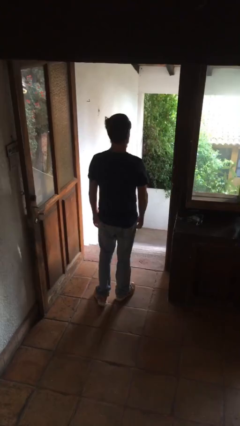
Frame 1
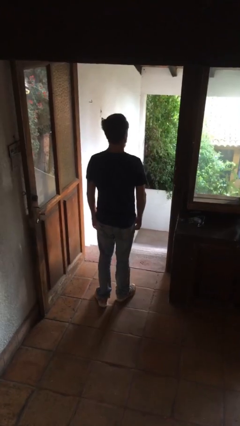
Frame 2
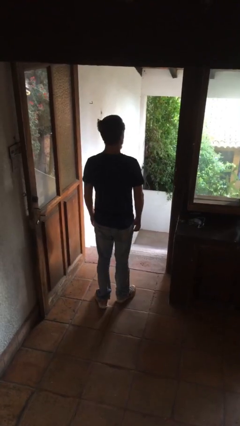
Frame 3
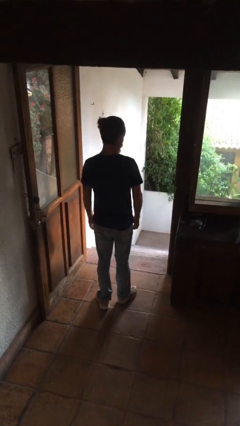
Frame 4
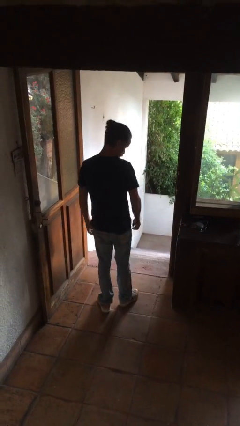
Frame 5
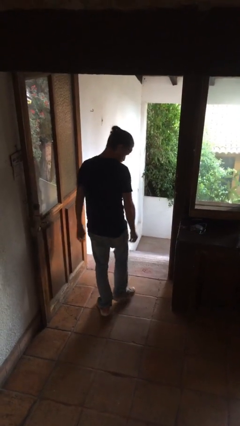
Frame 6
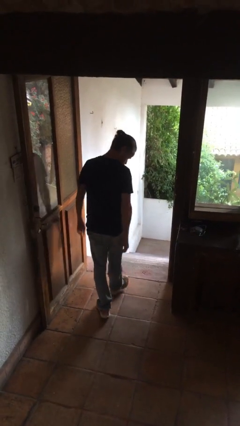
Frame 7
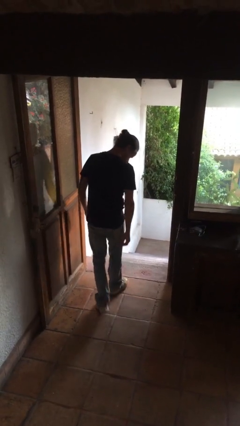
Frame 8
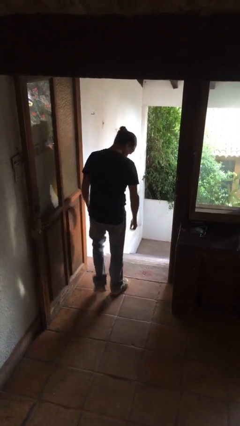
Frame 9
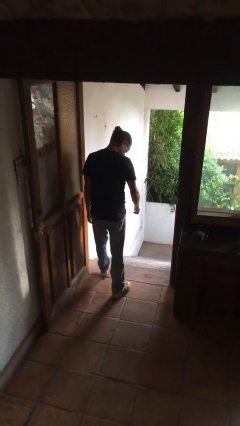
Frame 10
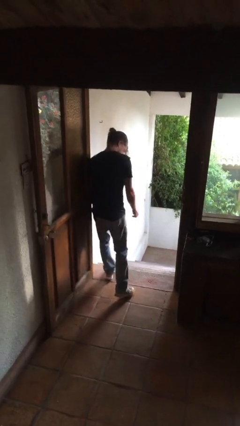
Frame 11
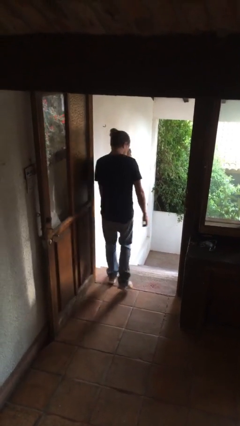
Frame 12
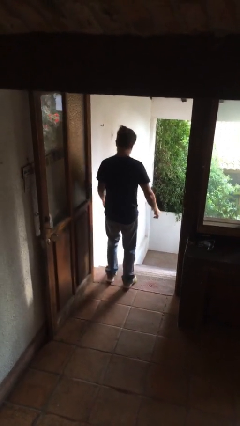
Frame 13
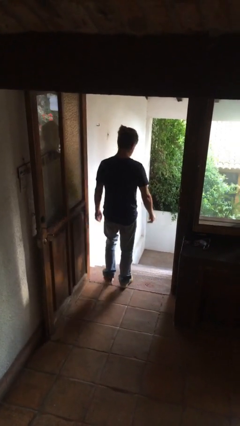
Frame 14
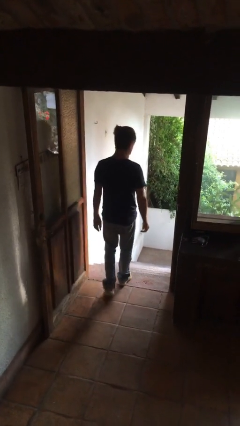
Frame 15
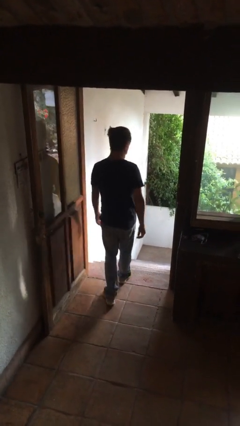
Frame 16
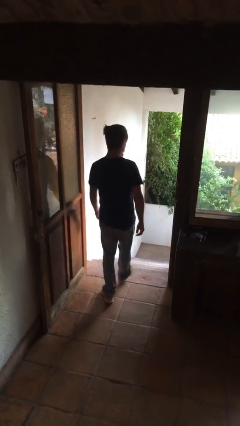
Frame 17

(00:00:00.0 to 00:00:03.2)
person bumps into wall

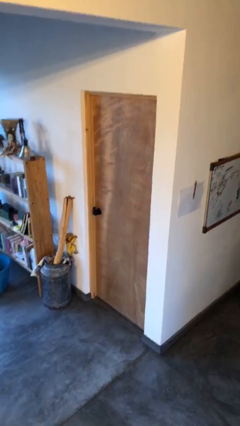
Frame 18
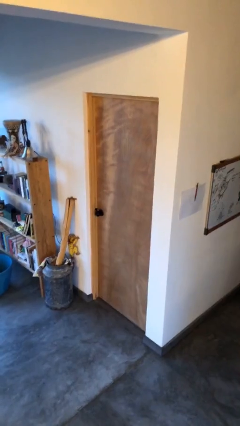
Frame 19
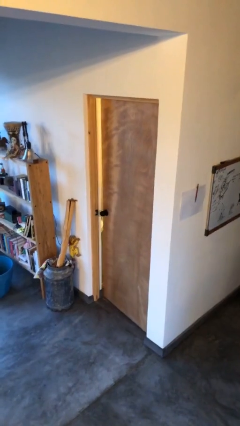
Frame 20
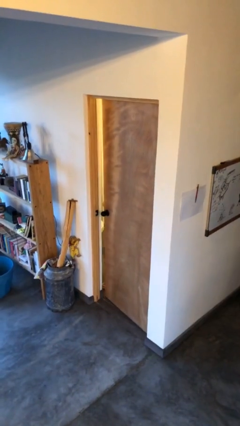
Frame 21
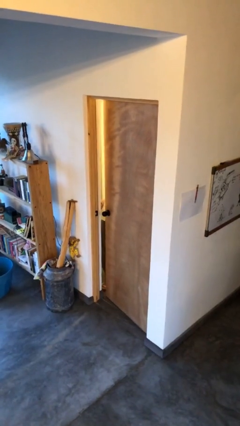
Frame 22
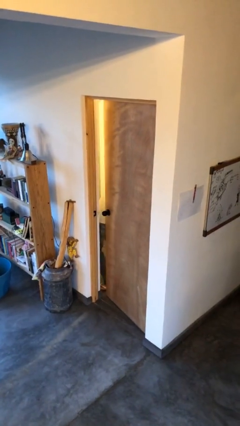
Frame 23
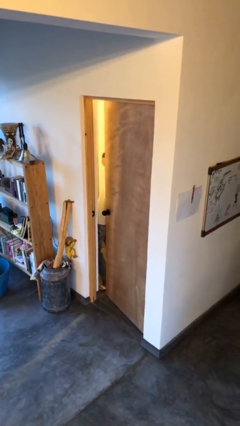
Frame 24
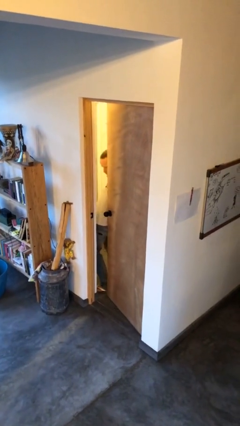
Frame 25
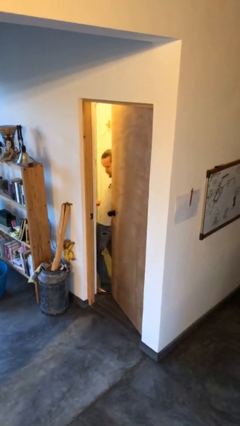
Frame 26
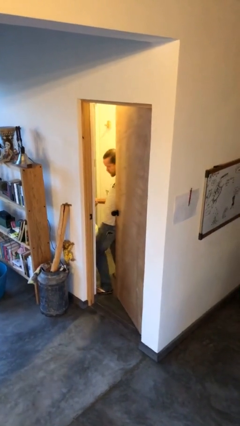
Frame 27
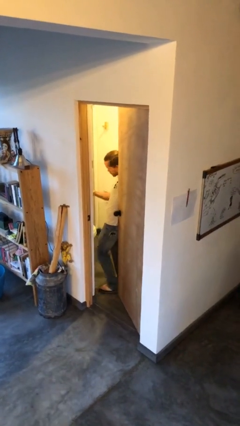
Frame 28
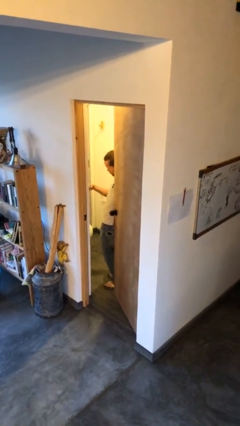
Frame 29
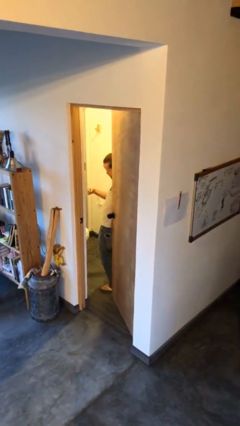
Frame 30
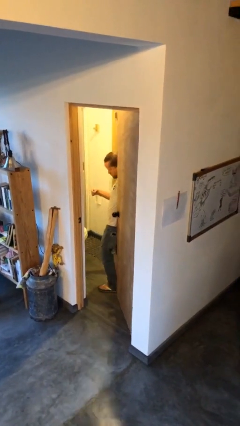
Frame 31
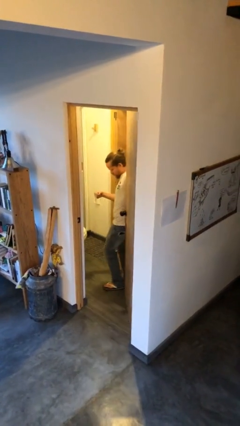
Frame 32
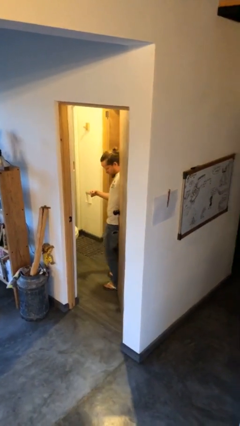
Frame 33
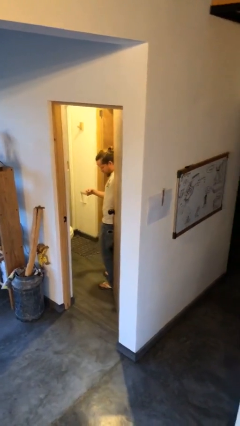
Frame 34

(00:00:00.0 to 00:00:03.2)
person opens facility door

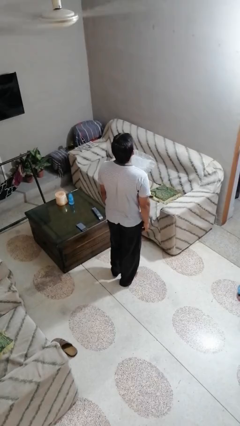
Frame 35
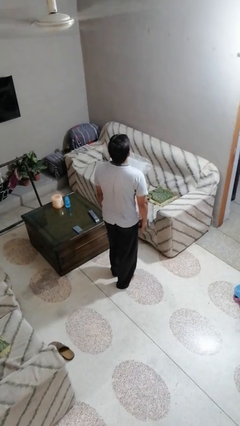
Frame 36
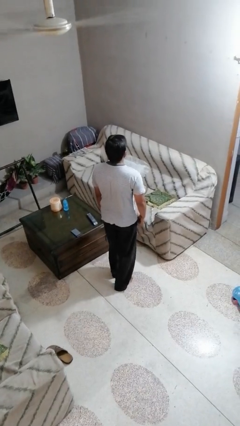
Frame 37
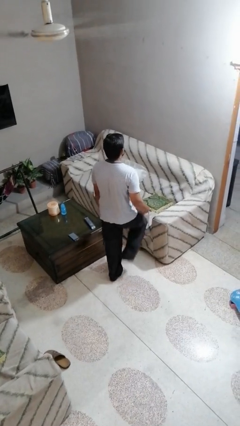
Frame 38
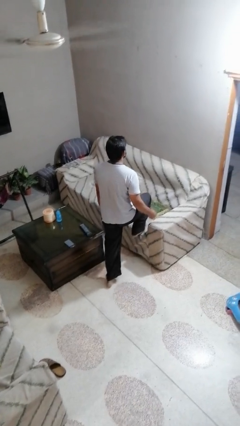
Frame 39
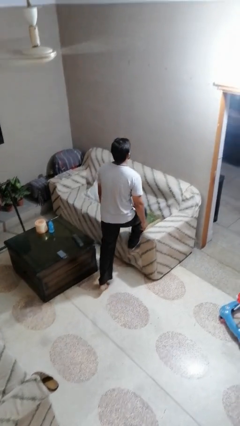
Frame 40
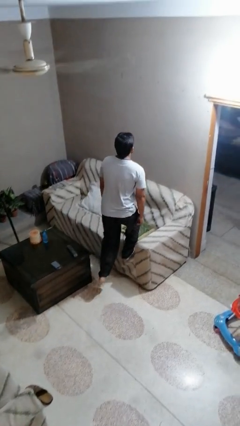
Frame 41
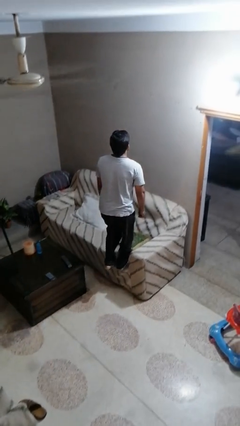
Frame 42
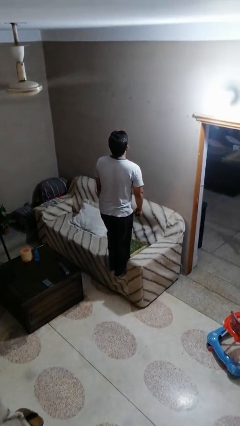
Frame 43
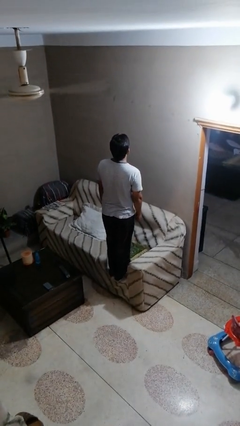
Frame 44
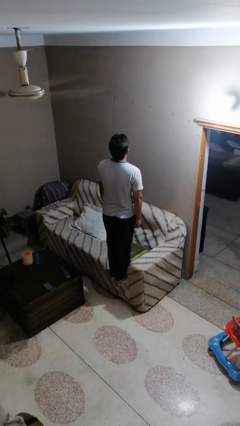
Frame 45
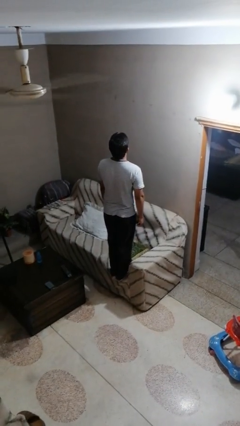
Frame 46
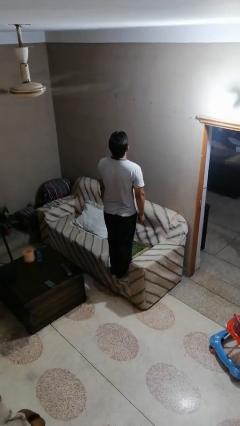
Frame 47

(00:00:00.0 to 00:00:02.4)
person climbs on couch

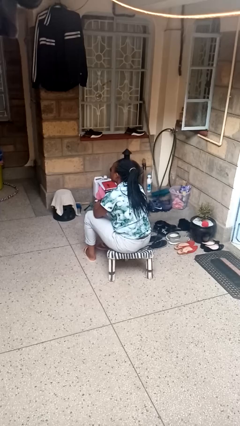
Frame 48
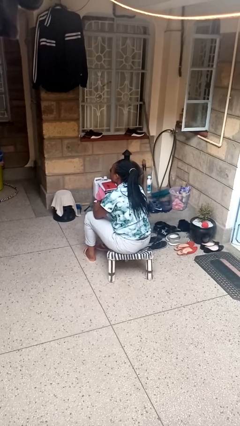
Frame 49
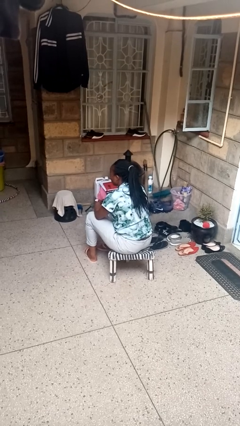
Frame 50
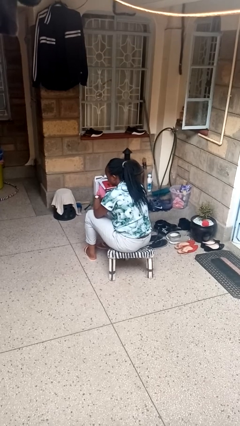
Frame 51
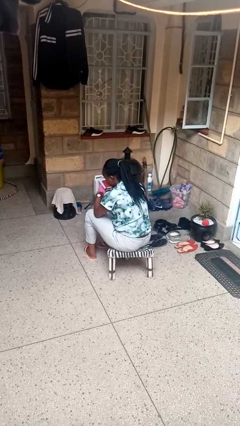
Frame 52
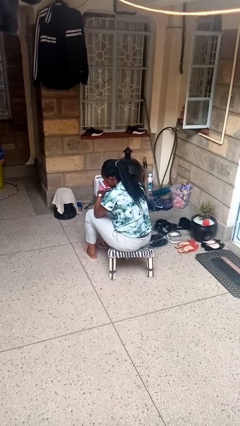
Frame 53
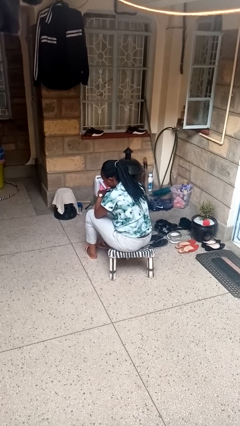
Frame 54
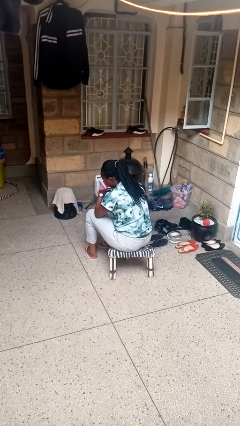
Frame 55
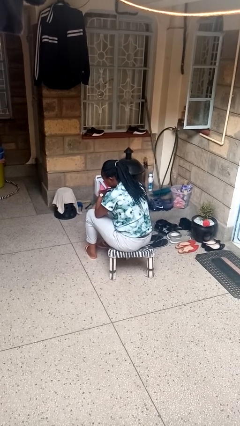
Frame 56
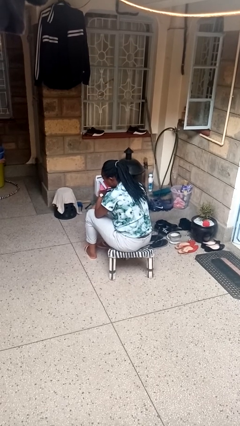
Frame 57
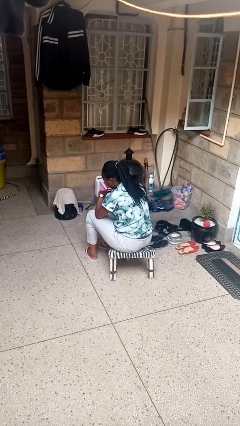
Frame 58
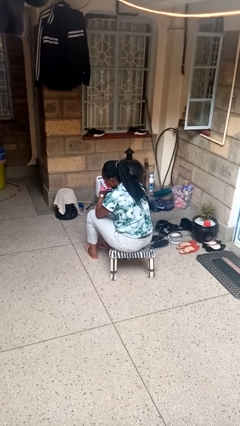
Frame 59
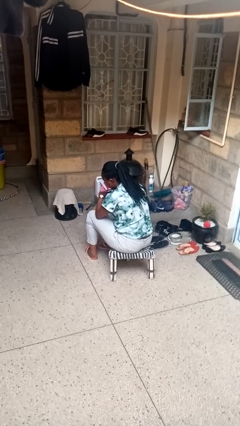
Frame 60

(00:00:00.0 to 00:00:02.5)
person looks at wristwatch

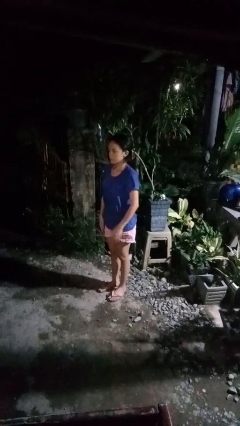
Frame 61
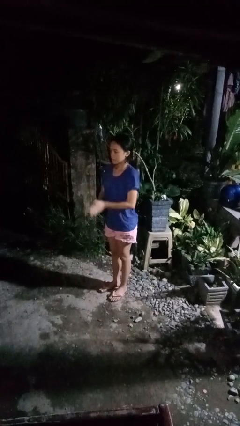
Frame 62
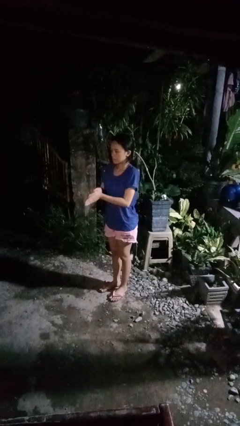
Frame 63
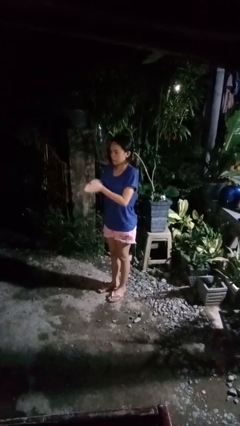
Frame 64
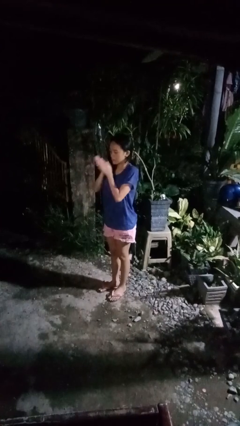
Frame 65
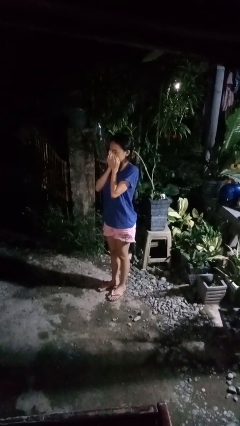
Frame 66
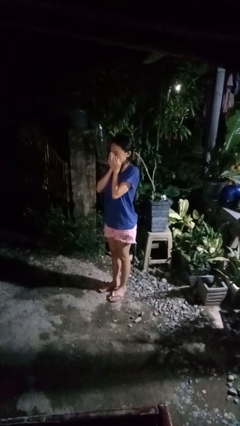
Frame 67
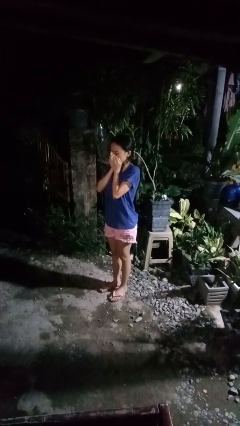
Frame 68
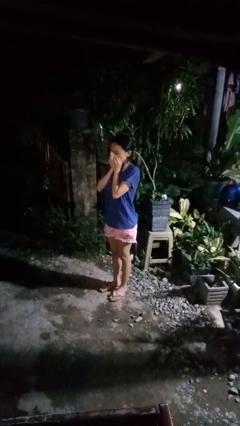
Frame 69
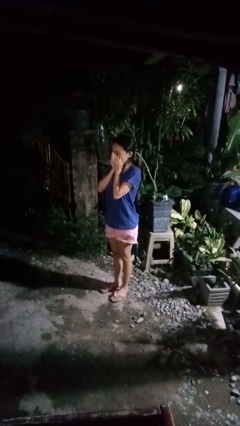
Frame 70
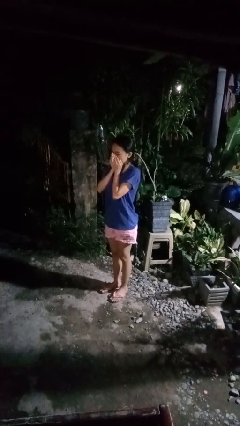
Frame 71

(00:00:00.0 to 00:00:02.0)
person blows into hands

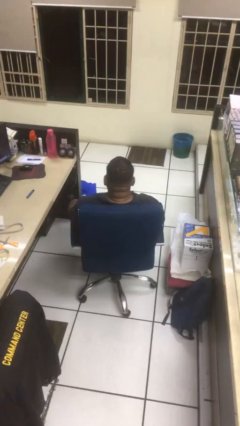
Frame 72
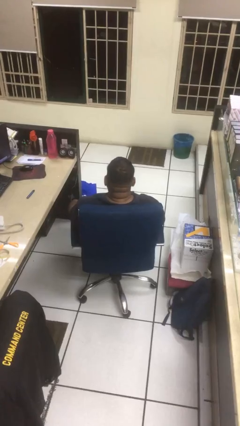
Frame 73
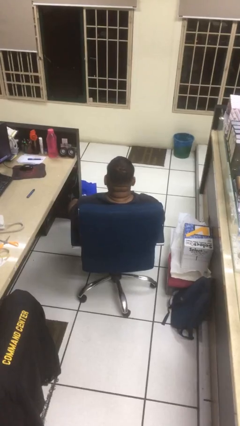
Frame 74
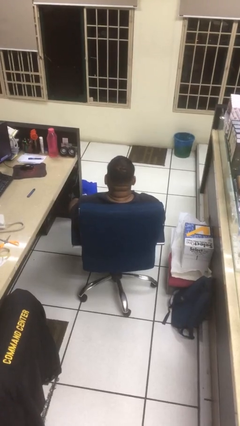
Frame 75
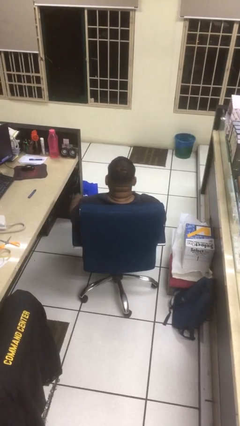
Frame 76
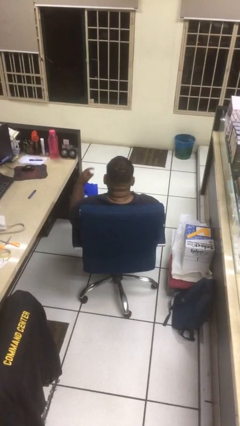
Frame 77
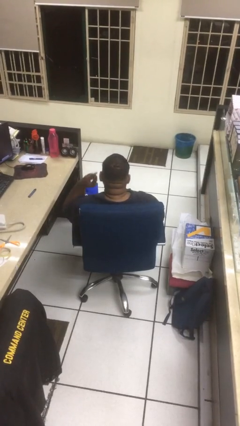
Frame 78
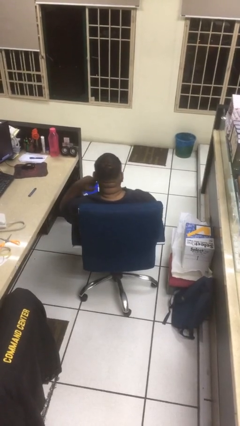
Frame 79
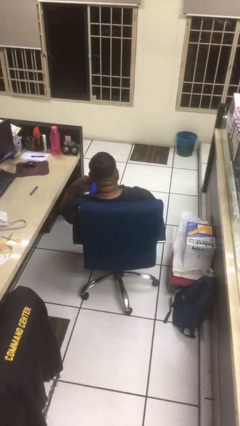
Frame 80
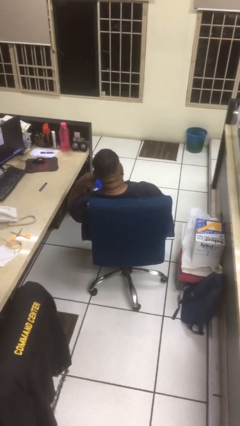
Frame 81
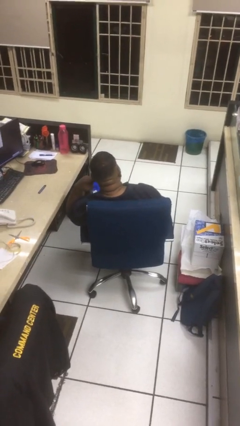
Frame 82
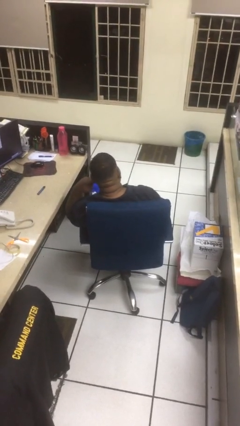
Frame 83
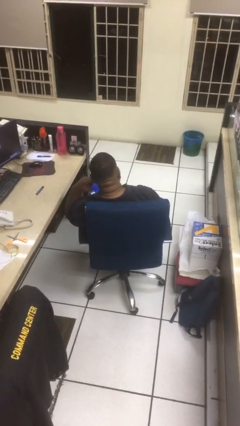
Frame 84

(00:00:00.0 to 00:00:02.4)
person gestures listen closely

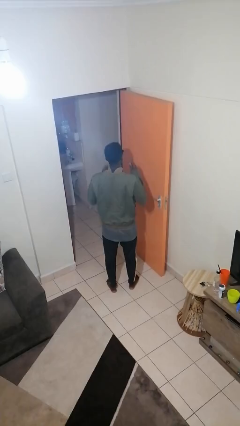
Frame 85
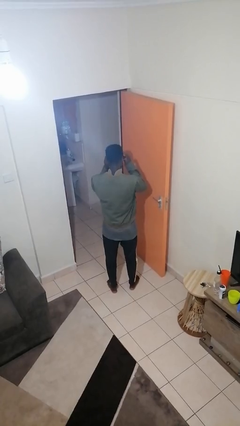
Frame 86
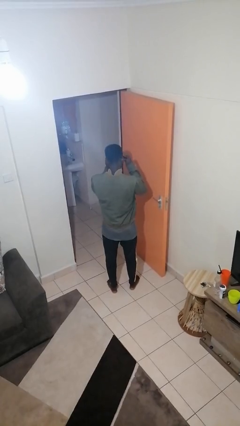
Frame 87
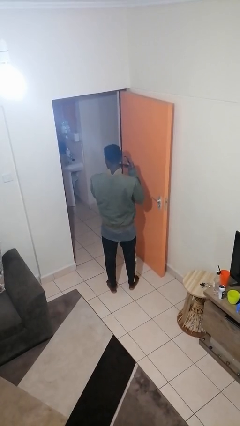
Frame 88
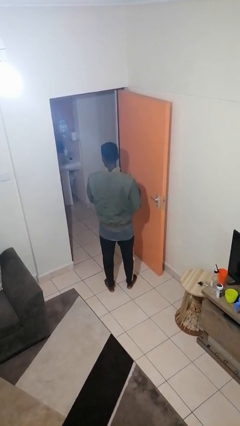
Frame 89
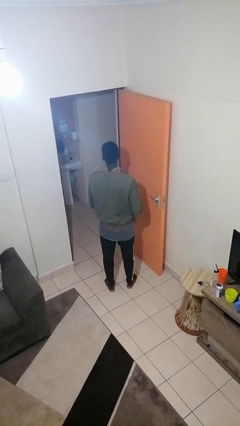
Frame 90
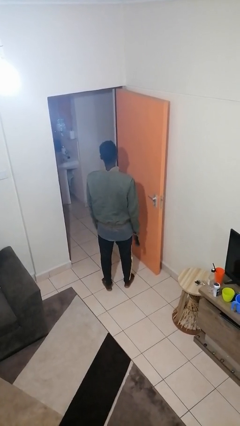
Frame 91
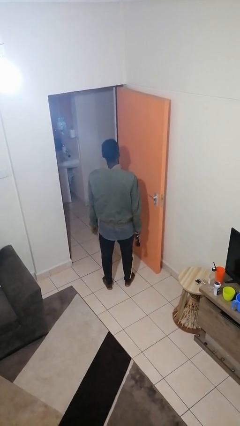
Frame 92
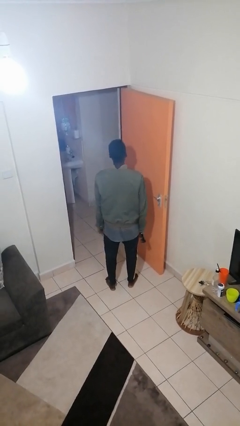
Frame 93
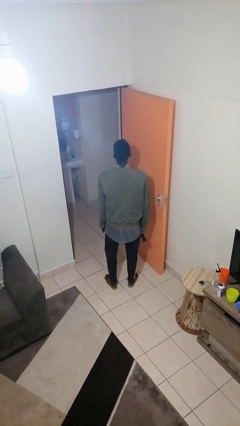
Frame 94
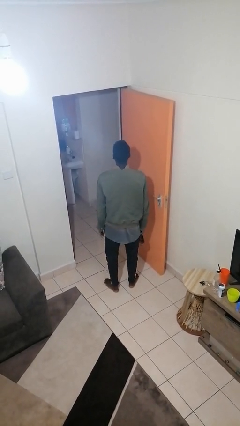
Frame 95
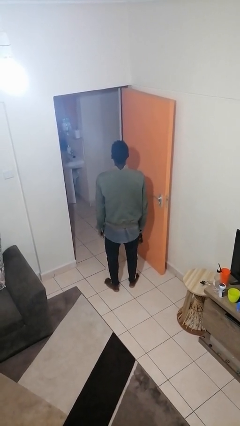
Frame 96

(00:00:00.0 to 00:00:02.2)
person takes off sunglasses
